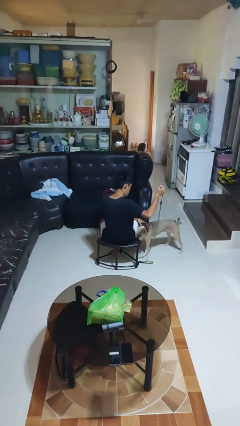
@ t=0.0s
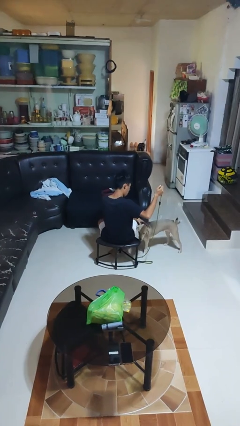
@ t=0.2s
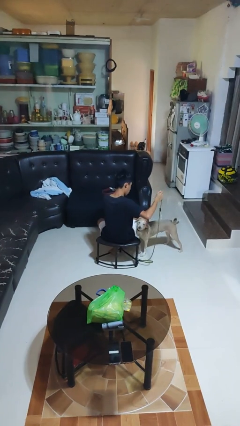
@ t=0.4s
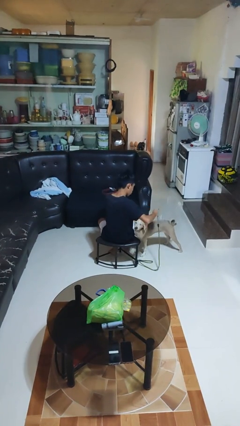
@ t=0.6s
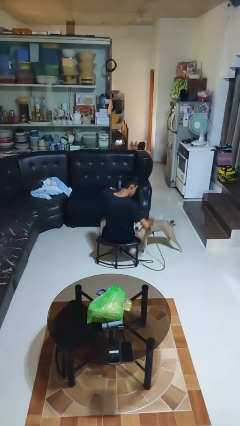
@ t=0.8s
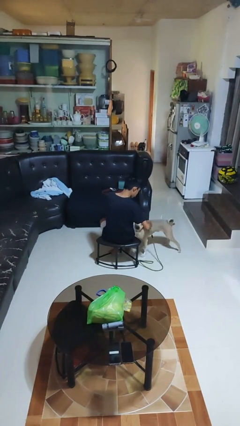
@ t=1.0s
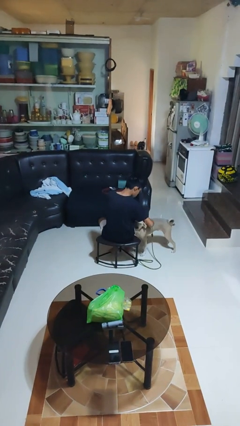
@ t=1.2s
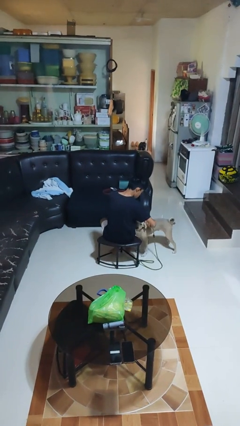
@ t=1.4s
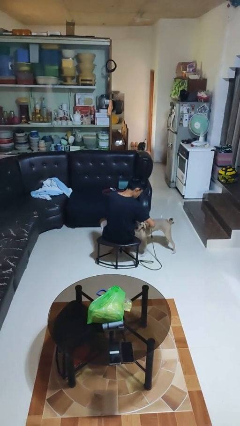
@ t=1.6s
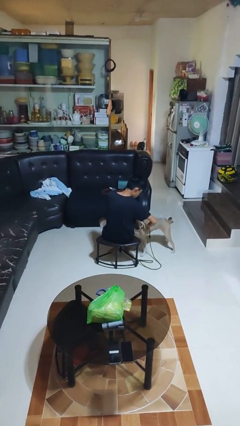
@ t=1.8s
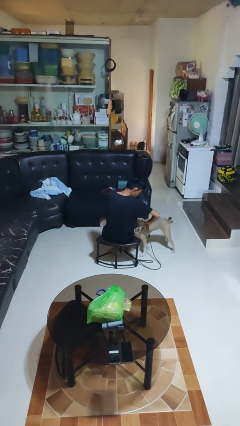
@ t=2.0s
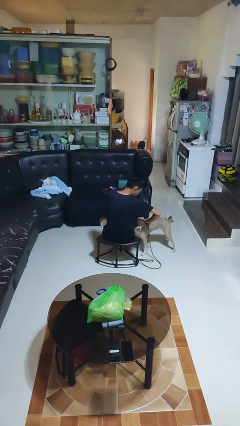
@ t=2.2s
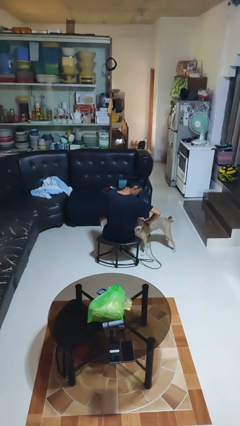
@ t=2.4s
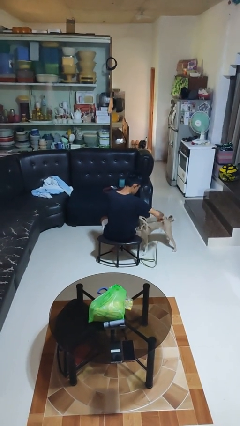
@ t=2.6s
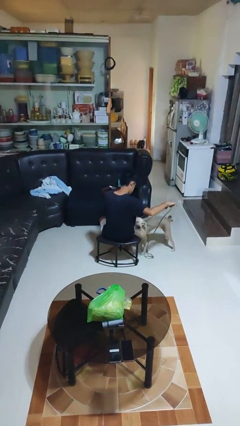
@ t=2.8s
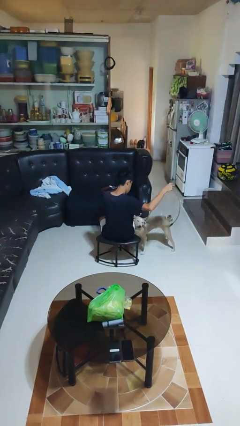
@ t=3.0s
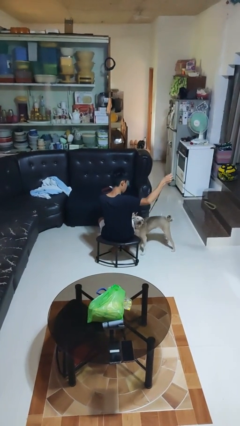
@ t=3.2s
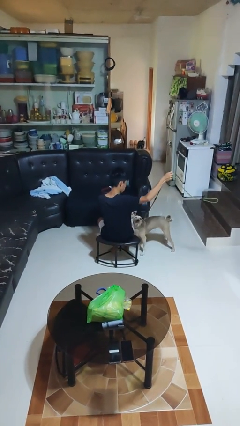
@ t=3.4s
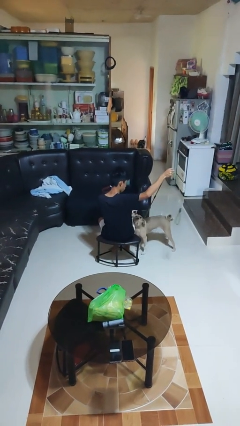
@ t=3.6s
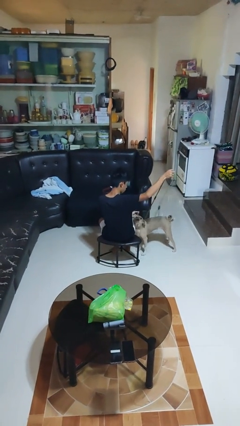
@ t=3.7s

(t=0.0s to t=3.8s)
person attaches leash to dog

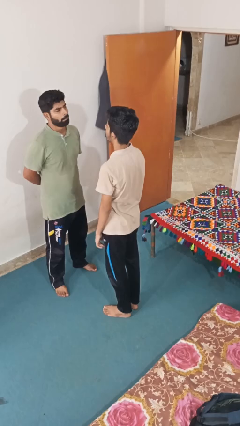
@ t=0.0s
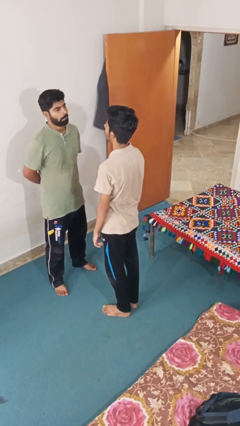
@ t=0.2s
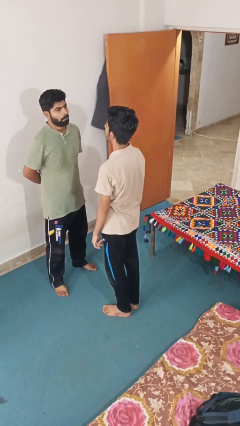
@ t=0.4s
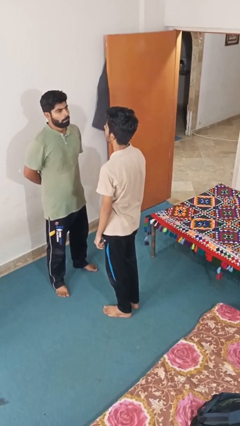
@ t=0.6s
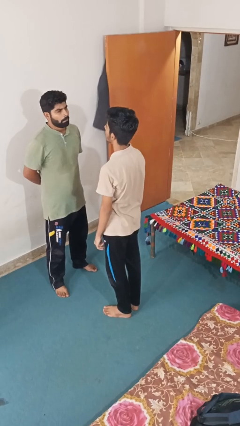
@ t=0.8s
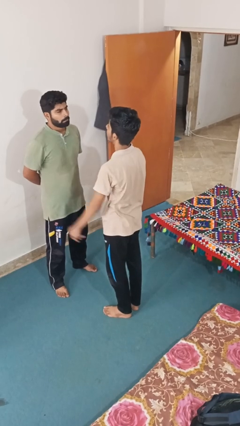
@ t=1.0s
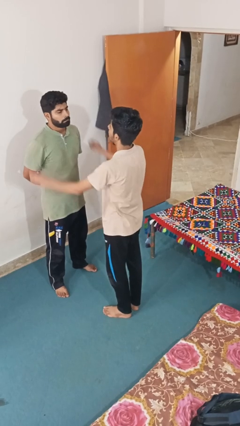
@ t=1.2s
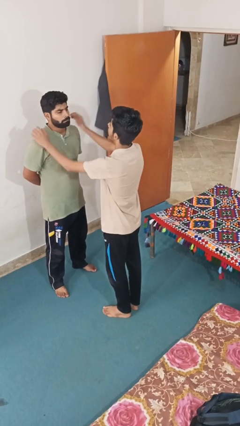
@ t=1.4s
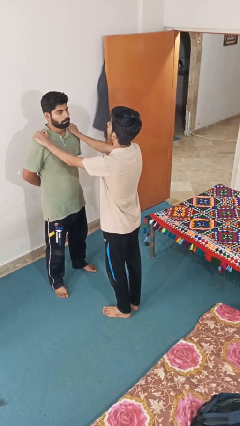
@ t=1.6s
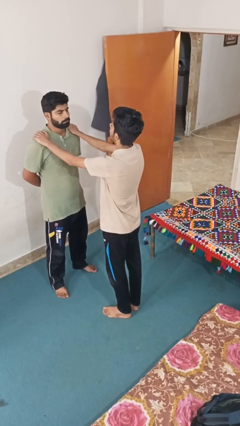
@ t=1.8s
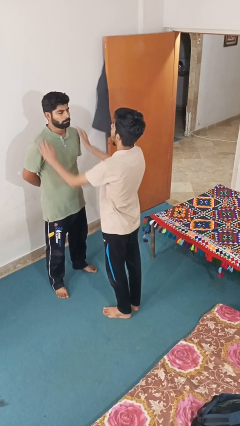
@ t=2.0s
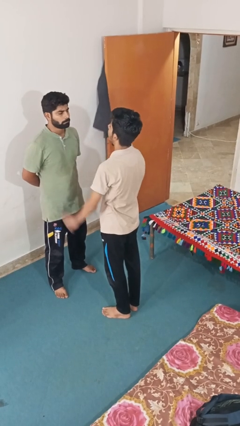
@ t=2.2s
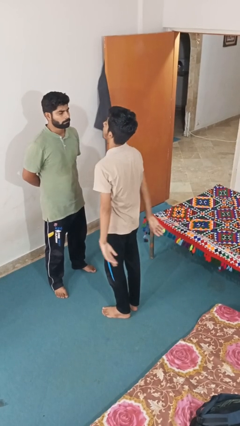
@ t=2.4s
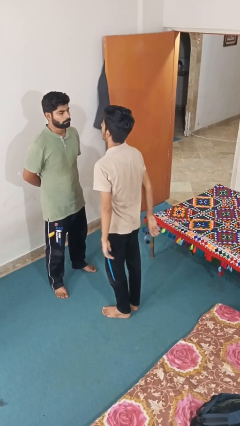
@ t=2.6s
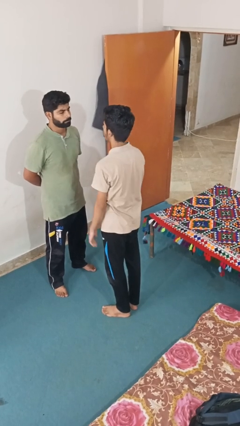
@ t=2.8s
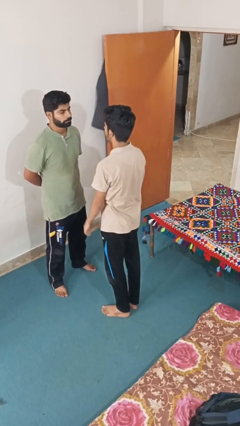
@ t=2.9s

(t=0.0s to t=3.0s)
person pounds shoulders of person

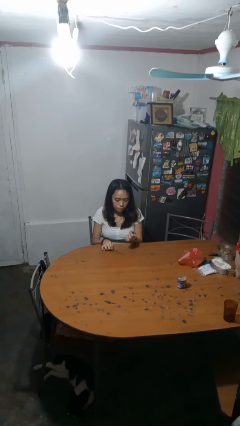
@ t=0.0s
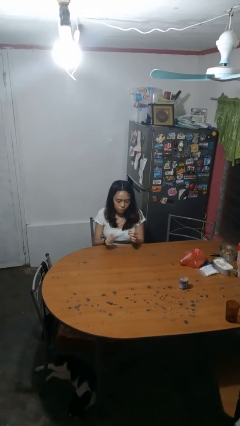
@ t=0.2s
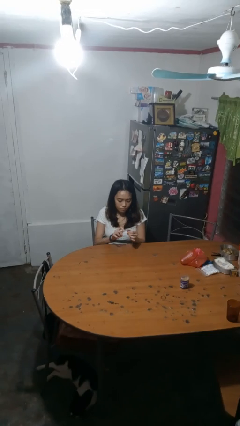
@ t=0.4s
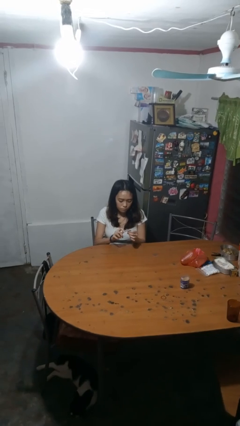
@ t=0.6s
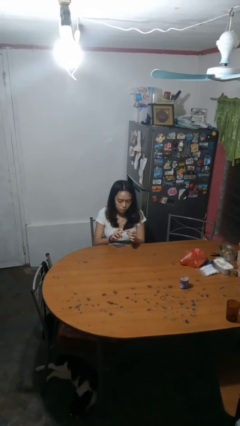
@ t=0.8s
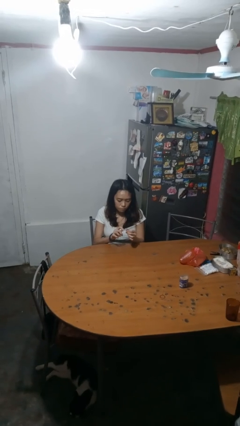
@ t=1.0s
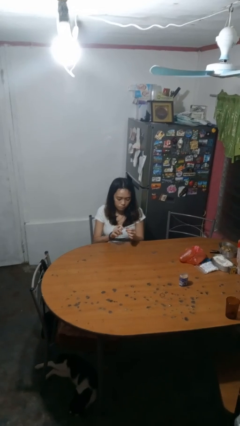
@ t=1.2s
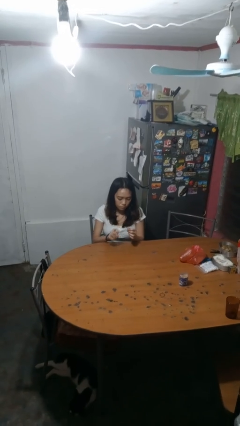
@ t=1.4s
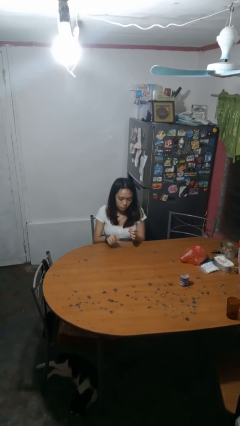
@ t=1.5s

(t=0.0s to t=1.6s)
person files fingernails

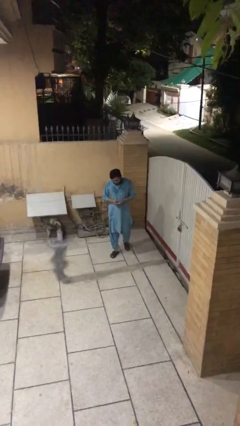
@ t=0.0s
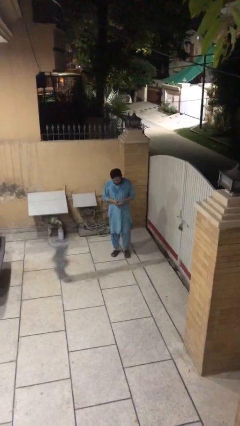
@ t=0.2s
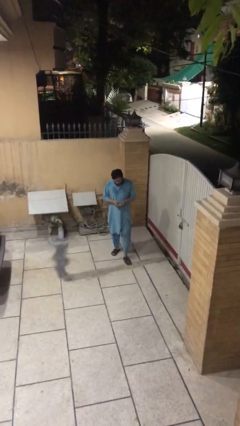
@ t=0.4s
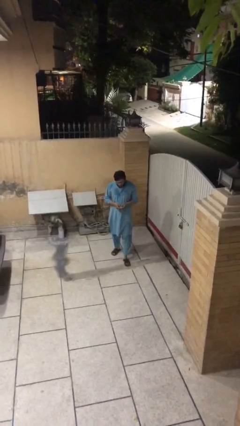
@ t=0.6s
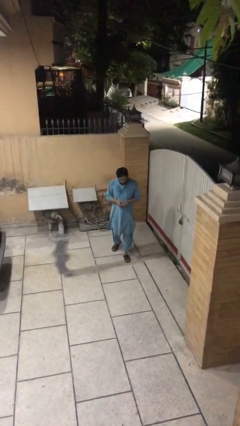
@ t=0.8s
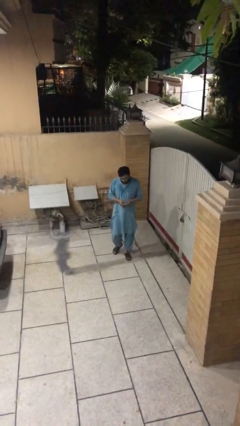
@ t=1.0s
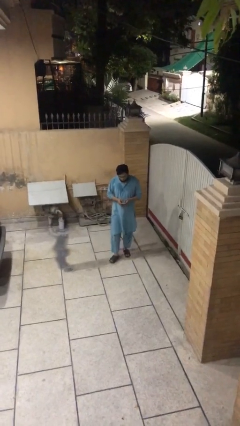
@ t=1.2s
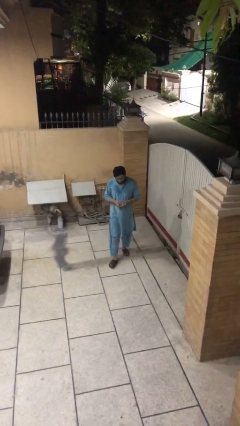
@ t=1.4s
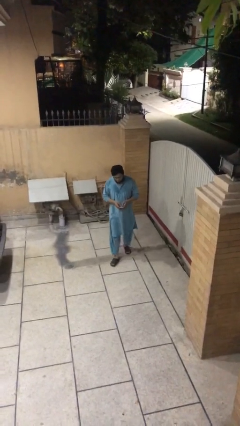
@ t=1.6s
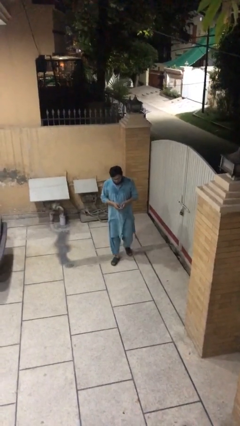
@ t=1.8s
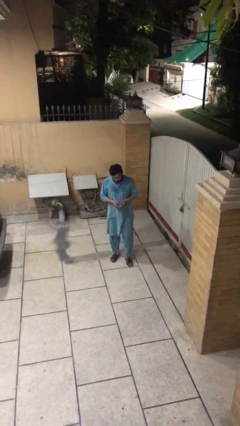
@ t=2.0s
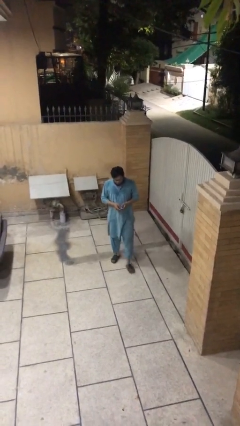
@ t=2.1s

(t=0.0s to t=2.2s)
person texts on phone

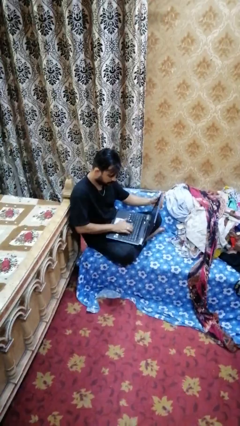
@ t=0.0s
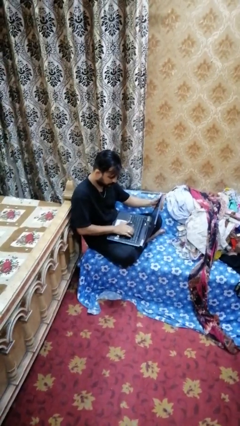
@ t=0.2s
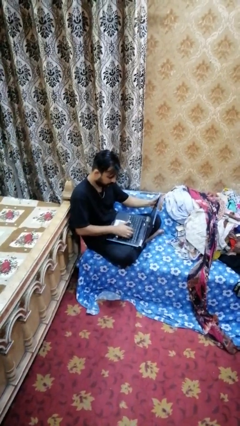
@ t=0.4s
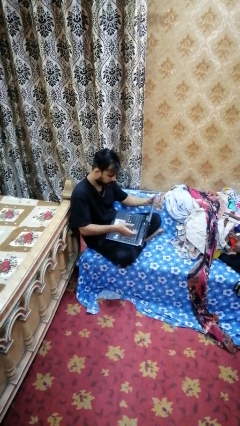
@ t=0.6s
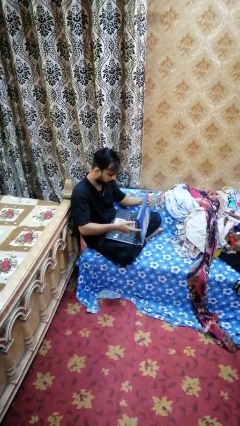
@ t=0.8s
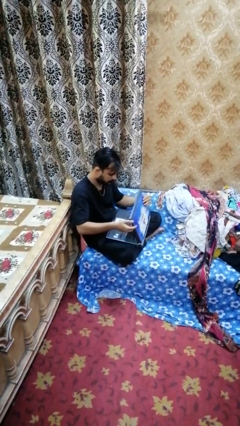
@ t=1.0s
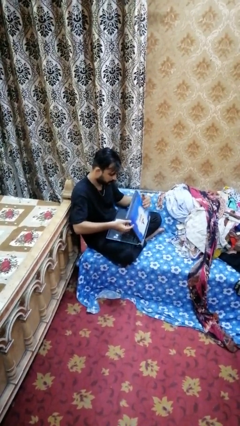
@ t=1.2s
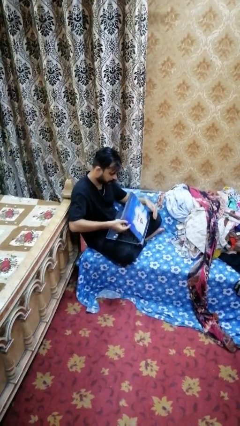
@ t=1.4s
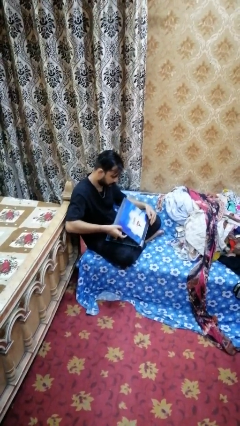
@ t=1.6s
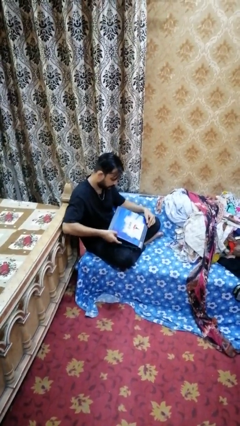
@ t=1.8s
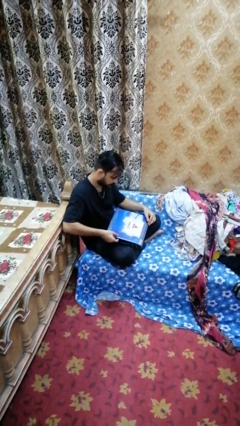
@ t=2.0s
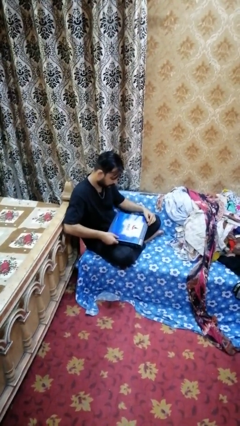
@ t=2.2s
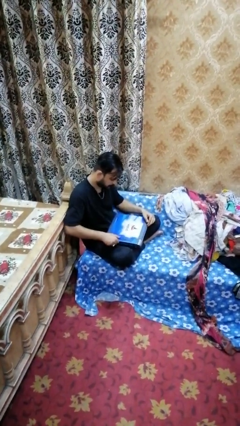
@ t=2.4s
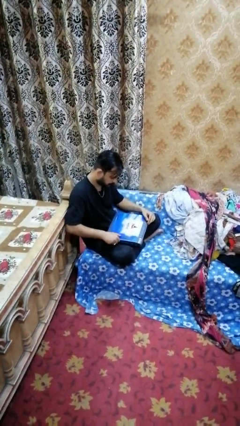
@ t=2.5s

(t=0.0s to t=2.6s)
person closes laptop

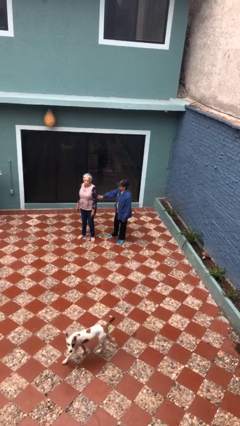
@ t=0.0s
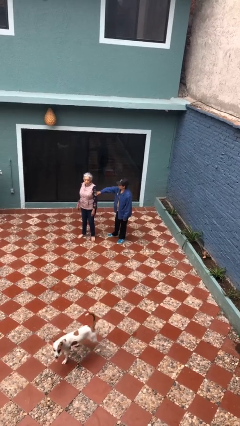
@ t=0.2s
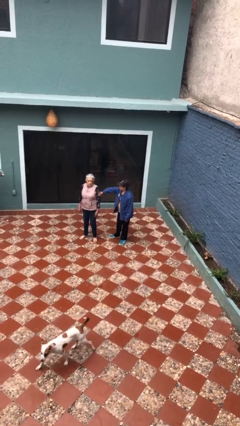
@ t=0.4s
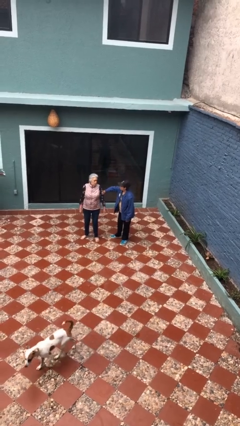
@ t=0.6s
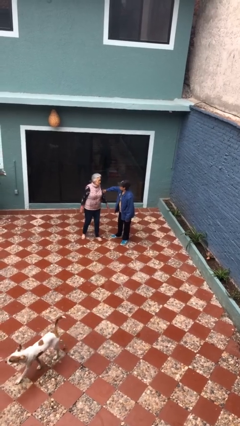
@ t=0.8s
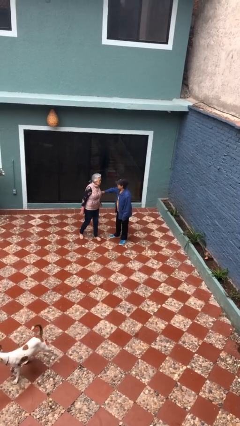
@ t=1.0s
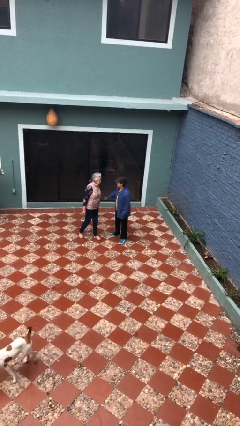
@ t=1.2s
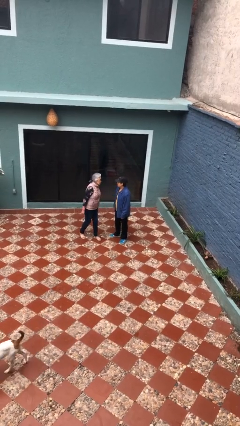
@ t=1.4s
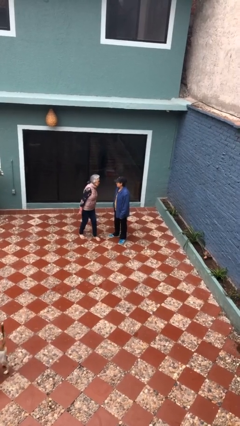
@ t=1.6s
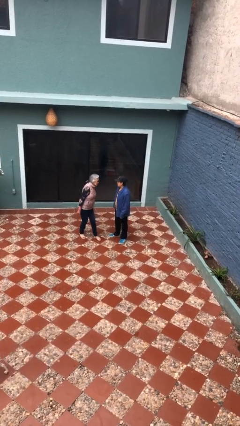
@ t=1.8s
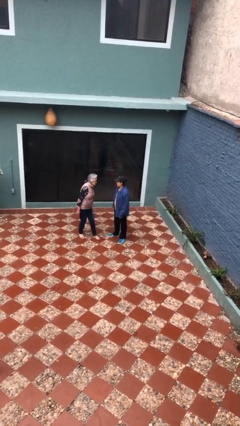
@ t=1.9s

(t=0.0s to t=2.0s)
person grabs person by bicep

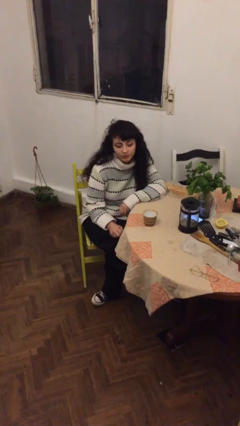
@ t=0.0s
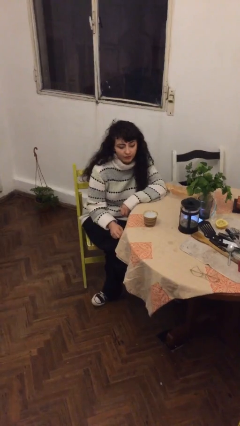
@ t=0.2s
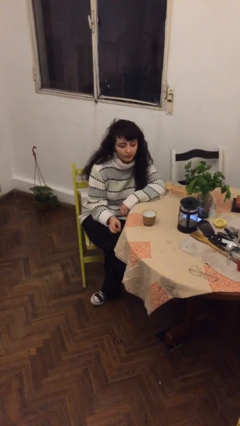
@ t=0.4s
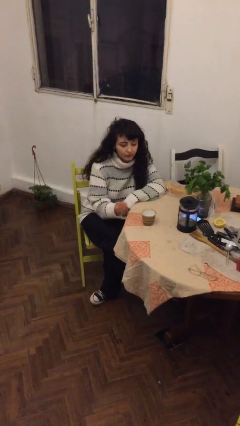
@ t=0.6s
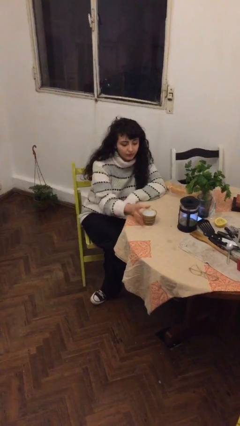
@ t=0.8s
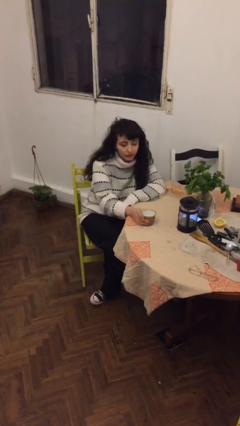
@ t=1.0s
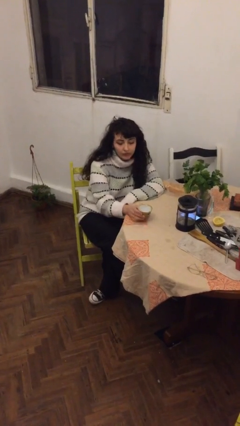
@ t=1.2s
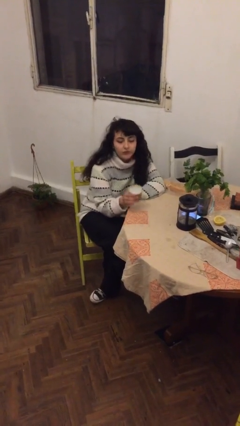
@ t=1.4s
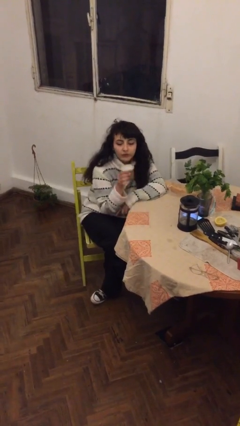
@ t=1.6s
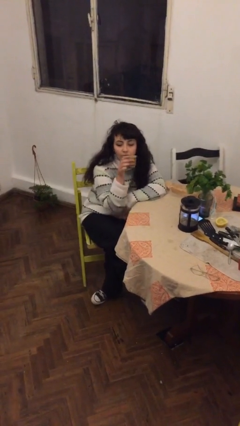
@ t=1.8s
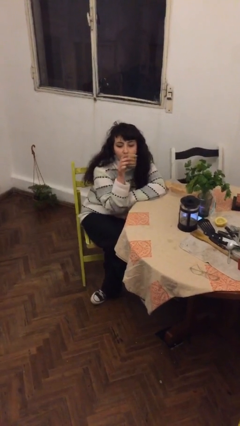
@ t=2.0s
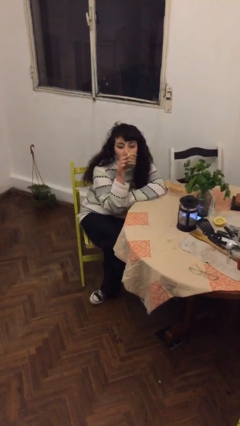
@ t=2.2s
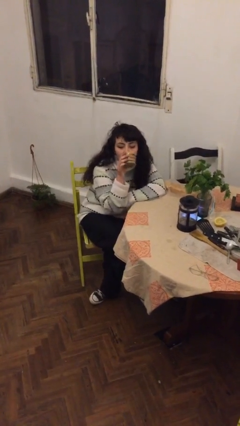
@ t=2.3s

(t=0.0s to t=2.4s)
person picks up object from table
